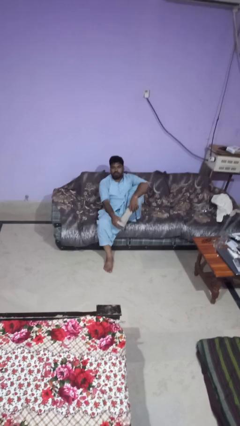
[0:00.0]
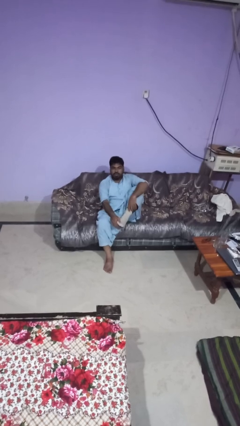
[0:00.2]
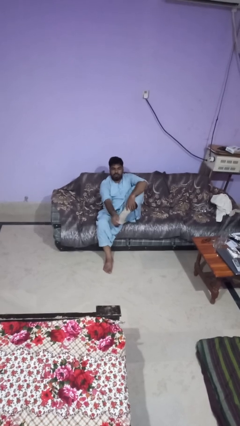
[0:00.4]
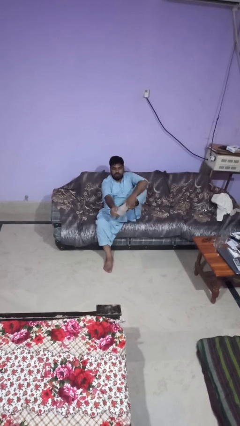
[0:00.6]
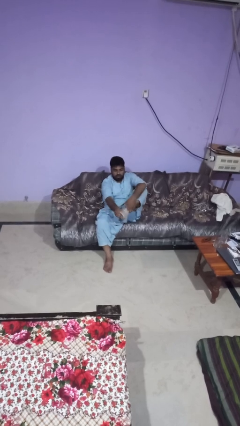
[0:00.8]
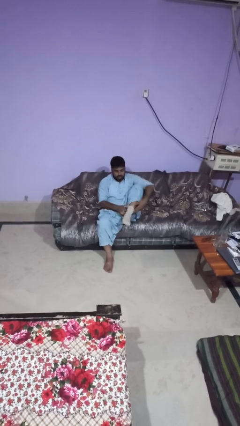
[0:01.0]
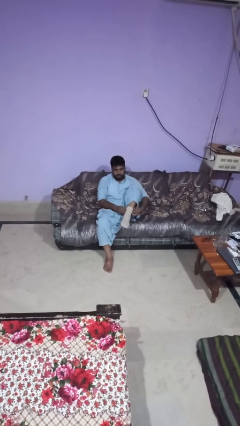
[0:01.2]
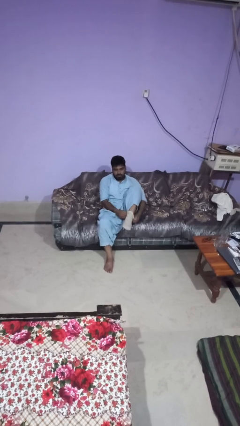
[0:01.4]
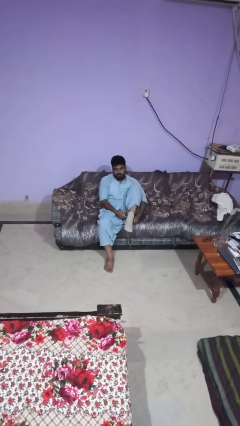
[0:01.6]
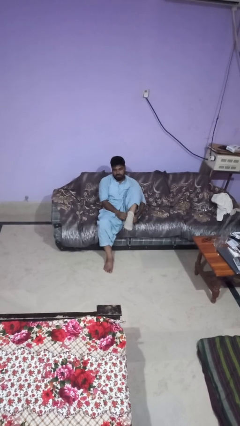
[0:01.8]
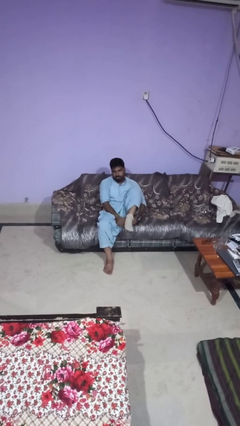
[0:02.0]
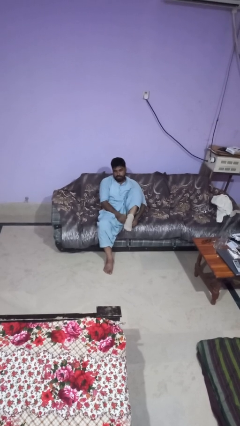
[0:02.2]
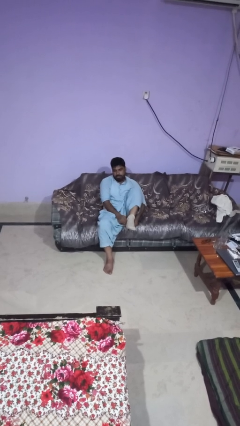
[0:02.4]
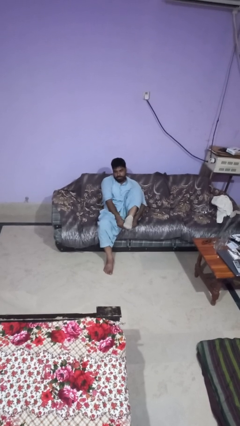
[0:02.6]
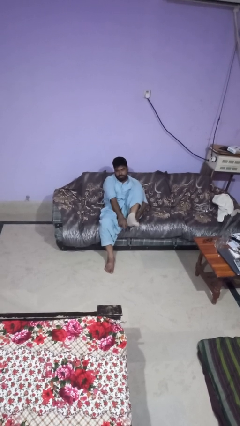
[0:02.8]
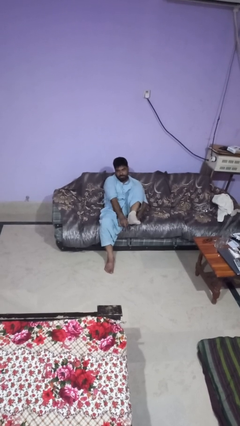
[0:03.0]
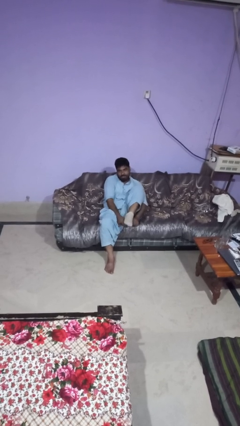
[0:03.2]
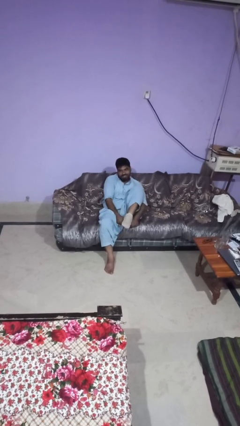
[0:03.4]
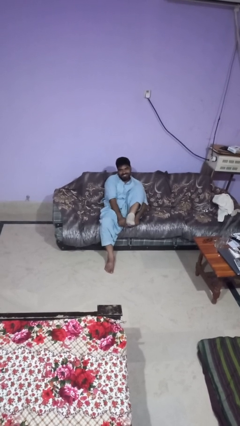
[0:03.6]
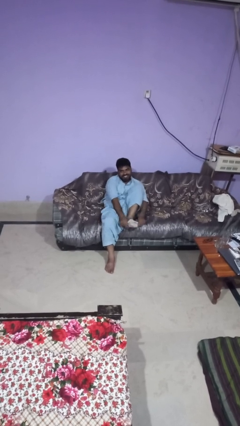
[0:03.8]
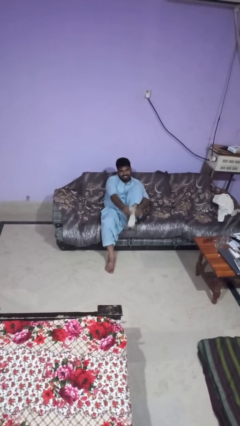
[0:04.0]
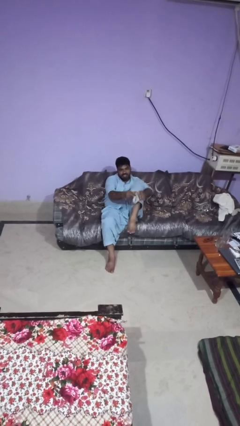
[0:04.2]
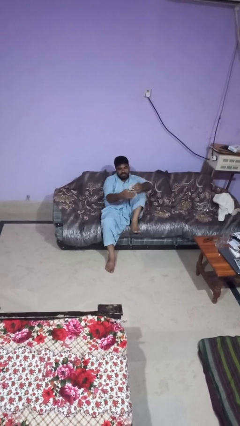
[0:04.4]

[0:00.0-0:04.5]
person takes off socks

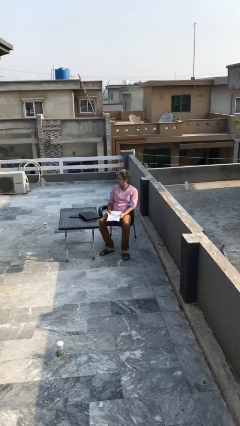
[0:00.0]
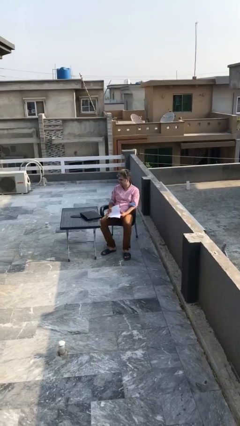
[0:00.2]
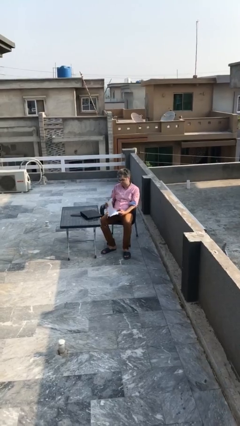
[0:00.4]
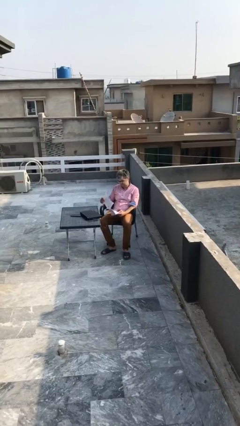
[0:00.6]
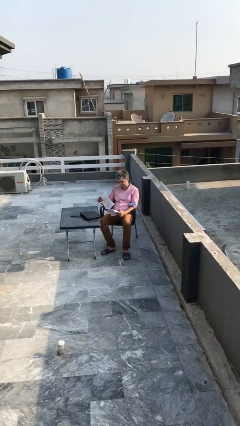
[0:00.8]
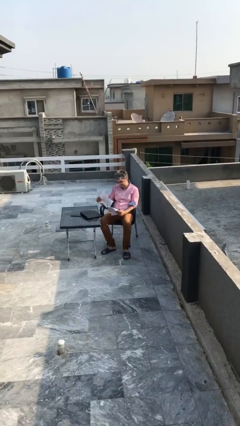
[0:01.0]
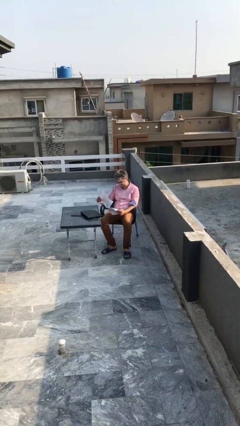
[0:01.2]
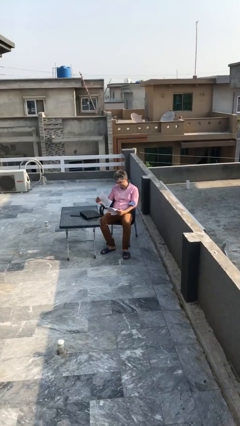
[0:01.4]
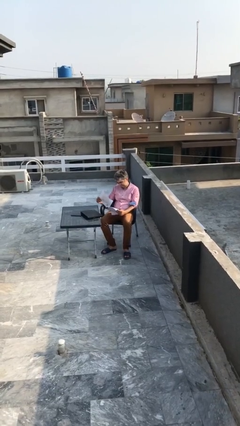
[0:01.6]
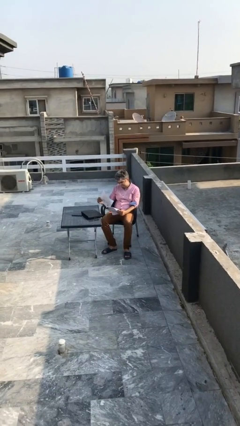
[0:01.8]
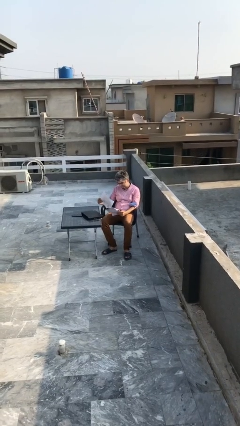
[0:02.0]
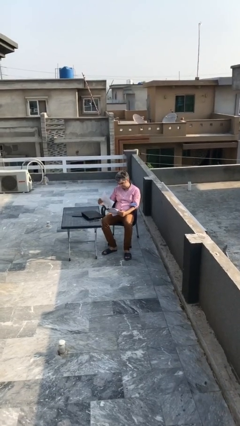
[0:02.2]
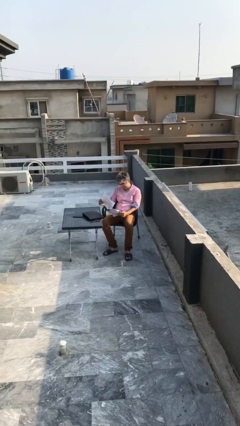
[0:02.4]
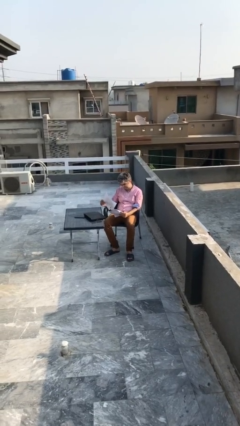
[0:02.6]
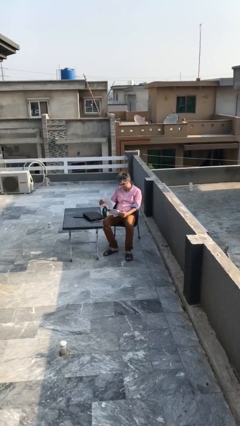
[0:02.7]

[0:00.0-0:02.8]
person reads document

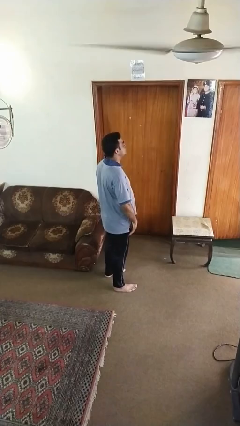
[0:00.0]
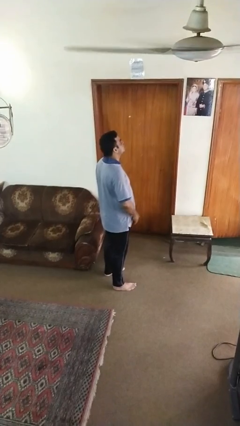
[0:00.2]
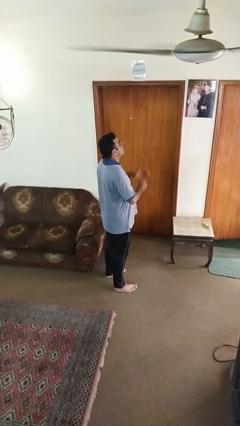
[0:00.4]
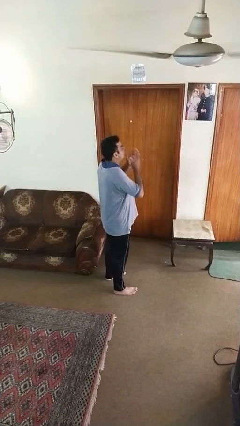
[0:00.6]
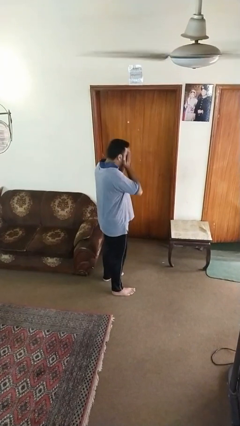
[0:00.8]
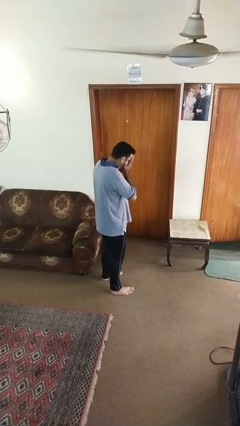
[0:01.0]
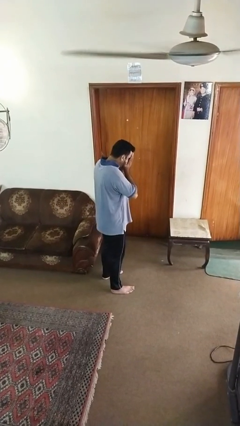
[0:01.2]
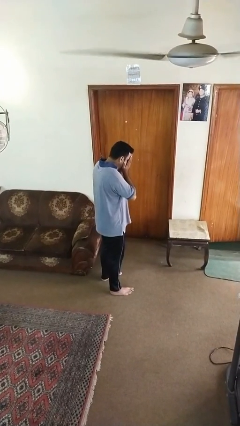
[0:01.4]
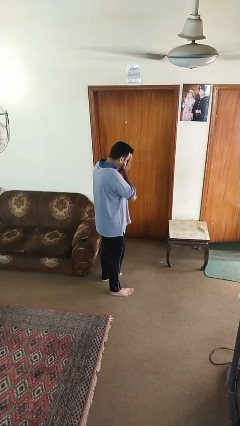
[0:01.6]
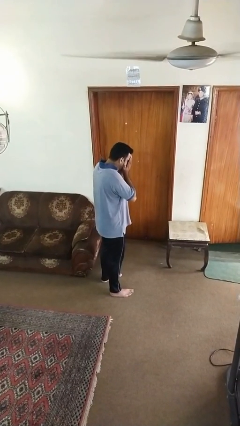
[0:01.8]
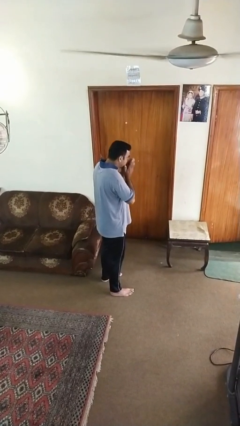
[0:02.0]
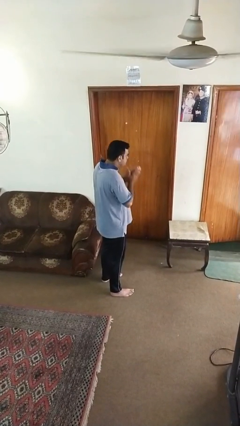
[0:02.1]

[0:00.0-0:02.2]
person sneezes into hand

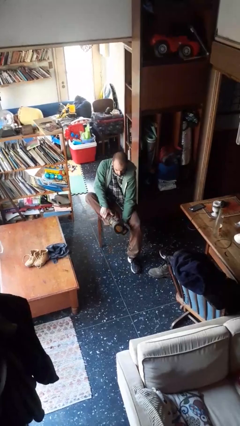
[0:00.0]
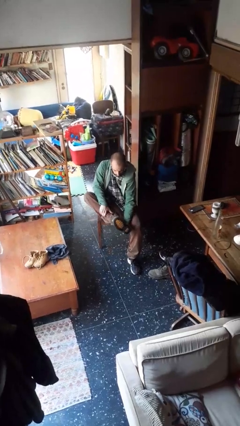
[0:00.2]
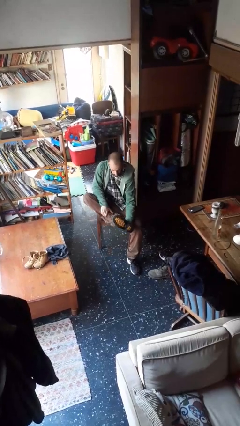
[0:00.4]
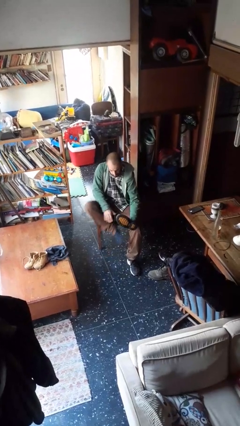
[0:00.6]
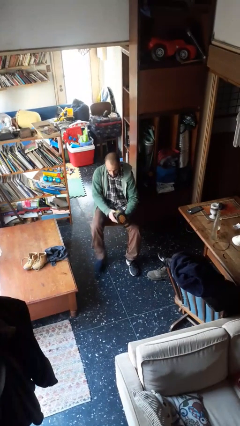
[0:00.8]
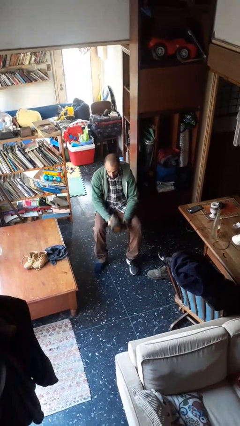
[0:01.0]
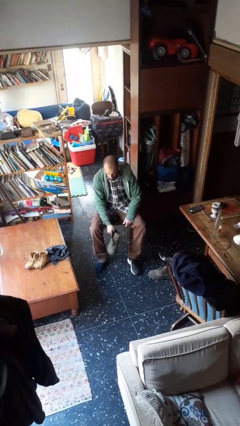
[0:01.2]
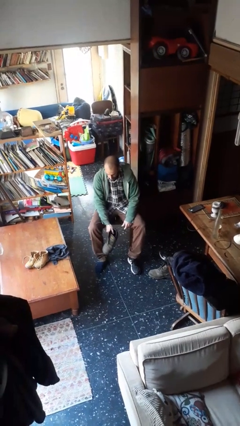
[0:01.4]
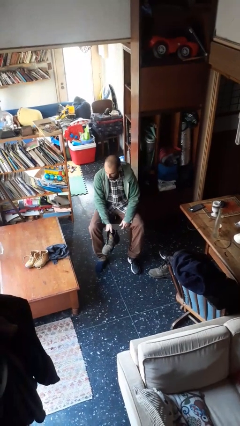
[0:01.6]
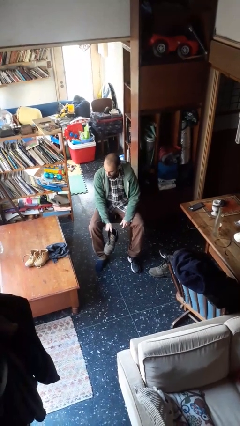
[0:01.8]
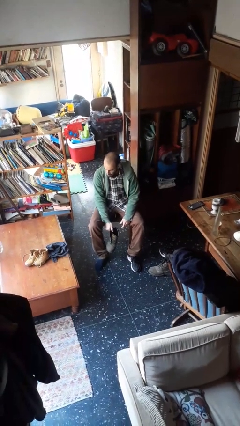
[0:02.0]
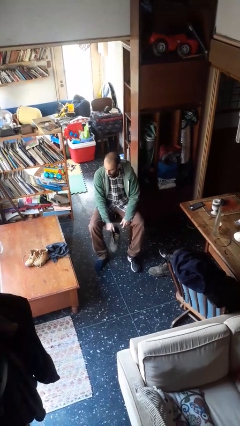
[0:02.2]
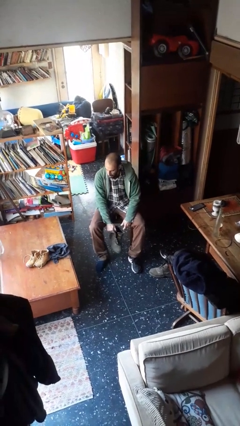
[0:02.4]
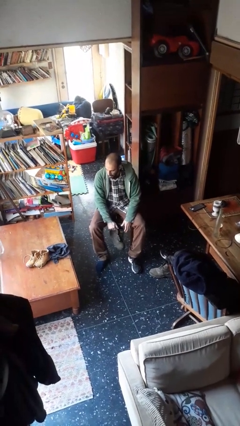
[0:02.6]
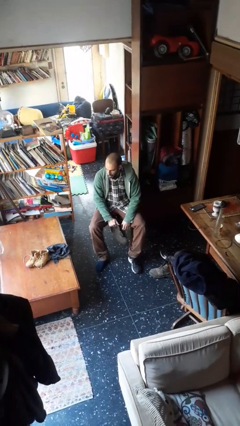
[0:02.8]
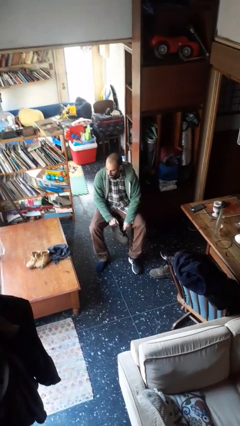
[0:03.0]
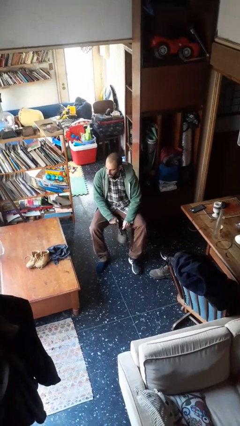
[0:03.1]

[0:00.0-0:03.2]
person takes off boots

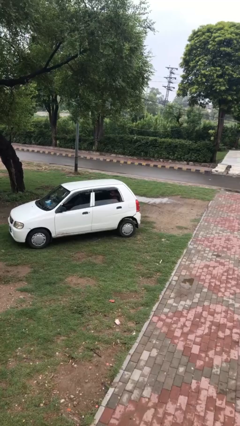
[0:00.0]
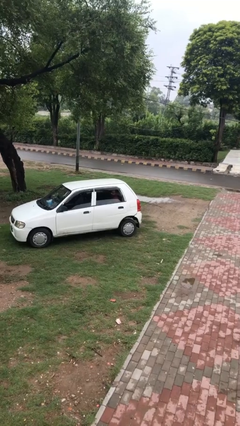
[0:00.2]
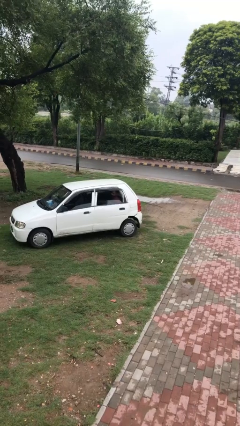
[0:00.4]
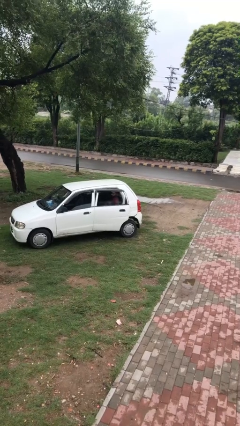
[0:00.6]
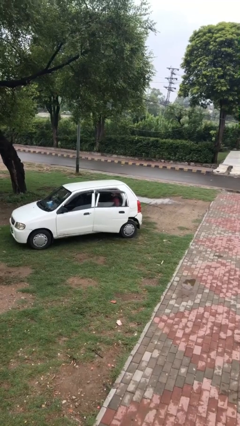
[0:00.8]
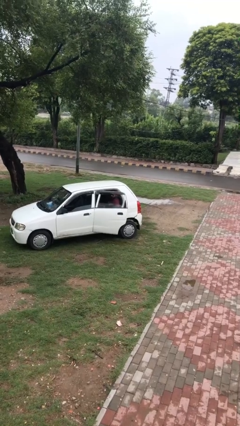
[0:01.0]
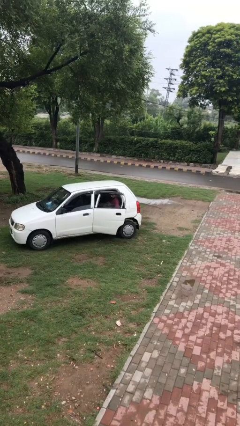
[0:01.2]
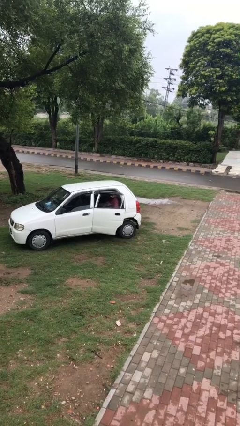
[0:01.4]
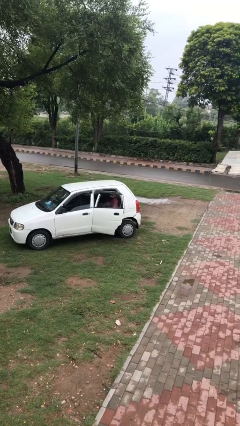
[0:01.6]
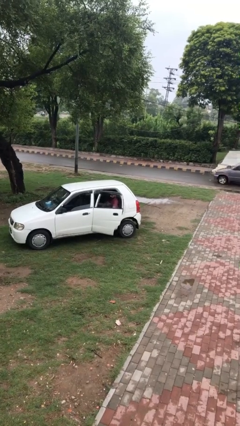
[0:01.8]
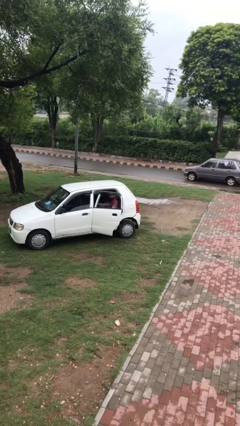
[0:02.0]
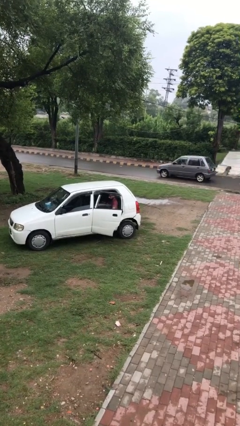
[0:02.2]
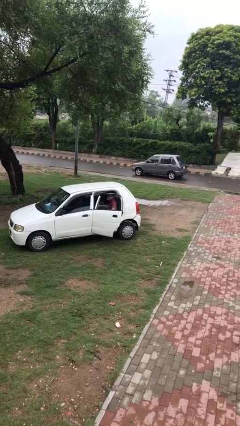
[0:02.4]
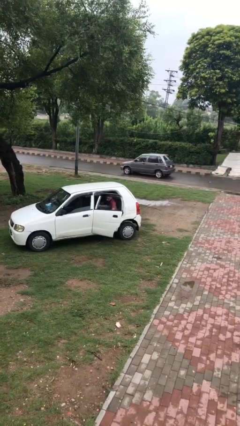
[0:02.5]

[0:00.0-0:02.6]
person opens car door

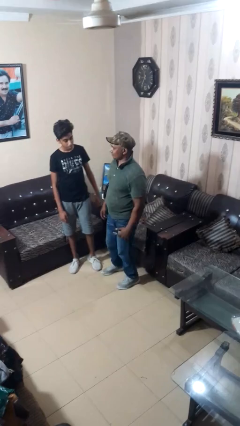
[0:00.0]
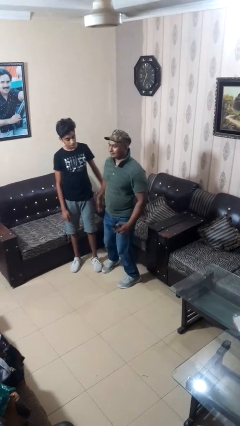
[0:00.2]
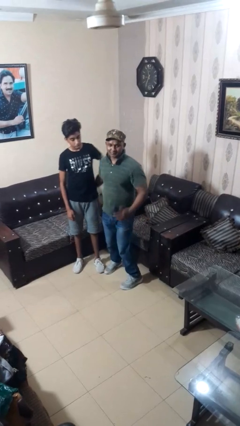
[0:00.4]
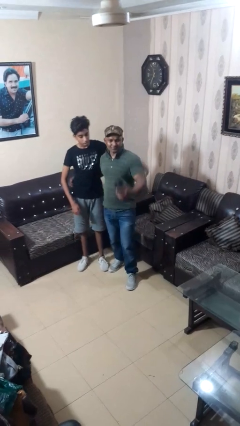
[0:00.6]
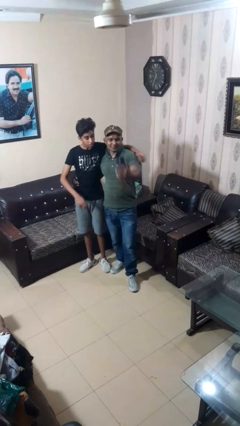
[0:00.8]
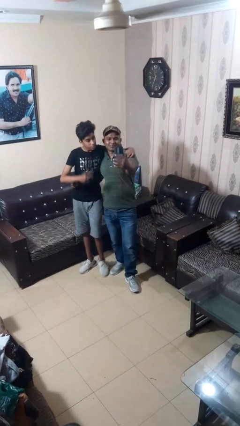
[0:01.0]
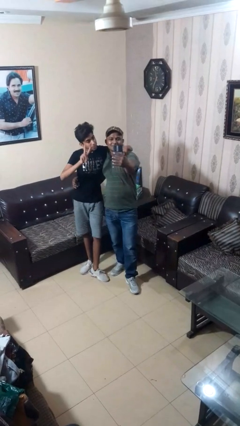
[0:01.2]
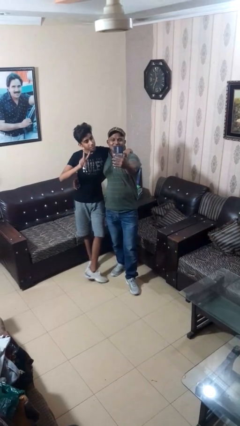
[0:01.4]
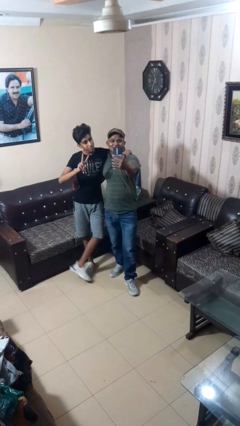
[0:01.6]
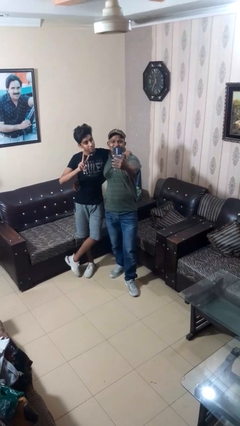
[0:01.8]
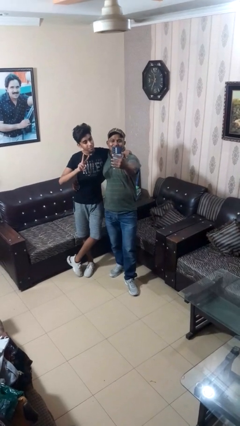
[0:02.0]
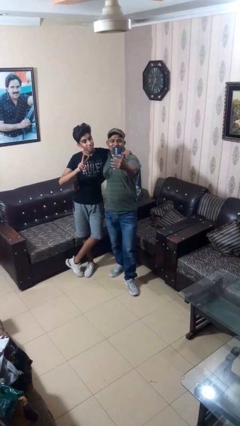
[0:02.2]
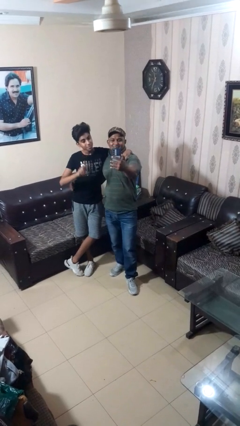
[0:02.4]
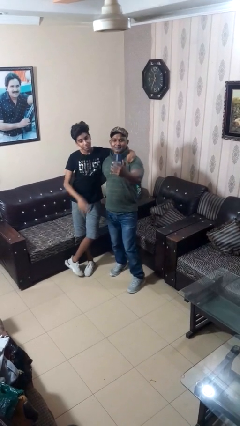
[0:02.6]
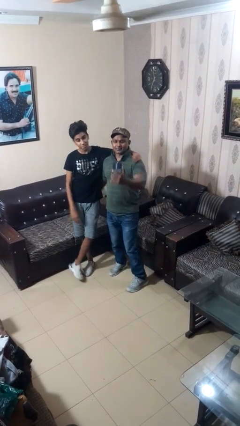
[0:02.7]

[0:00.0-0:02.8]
person takes selfie with person
